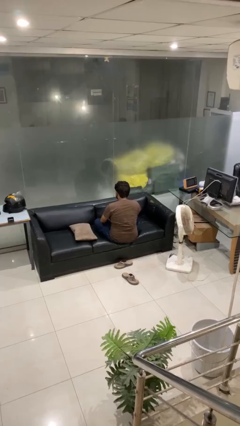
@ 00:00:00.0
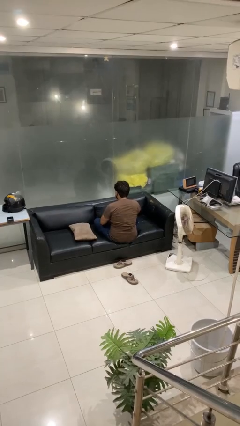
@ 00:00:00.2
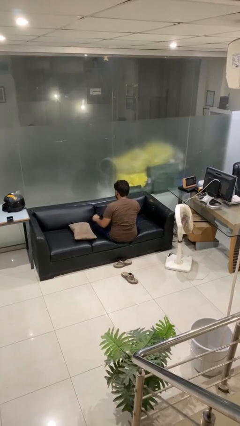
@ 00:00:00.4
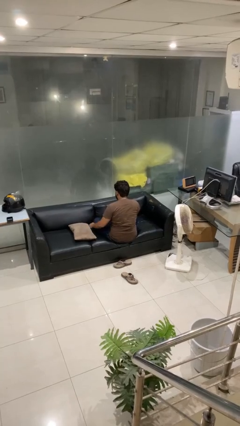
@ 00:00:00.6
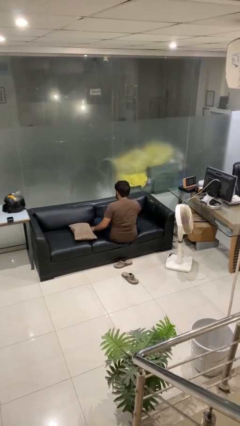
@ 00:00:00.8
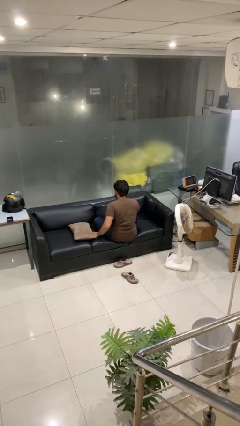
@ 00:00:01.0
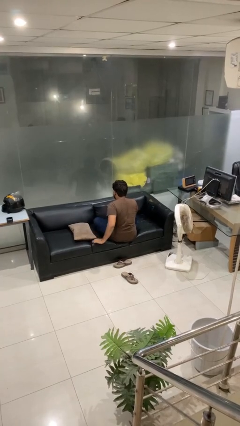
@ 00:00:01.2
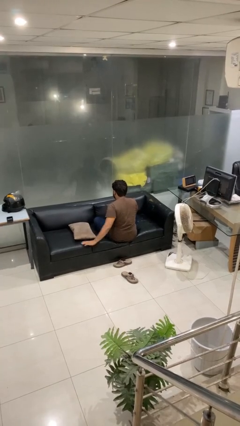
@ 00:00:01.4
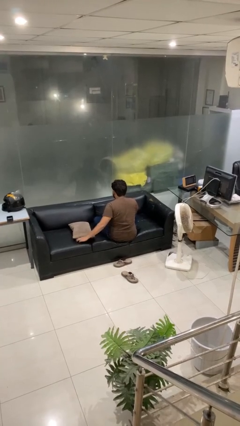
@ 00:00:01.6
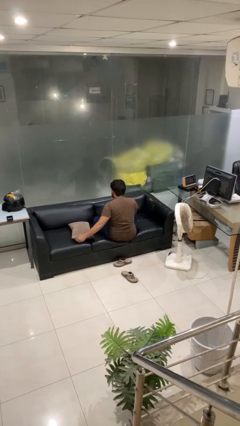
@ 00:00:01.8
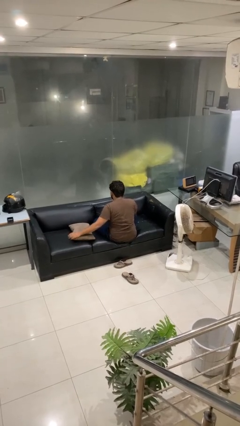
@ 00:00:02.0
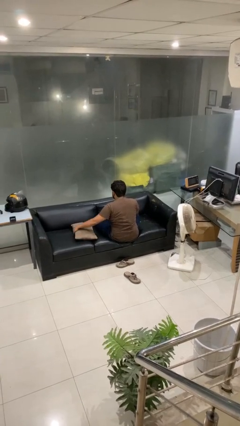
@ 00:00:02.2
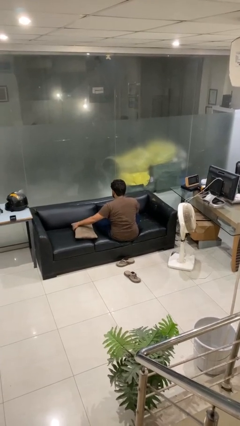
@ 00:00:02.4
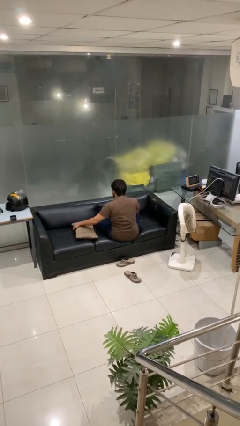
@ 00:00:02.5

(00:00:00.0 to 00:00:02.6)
person searches in couch

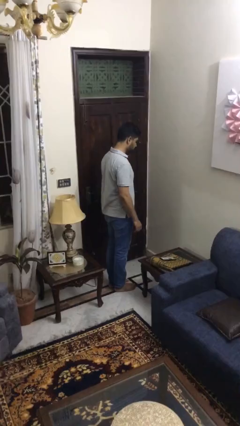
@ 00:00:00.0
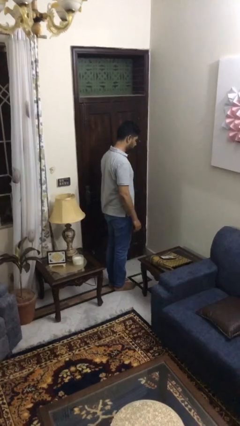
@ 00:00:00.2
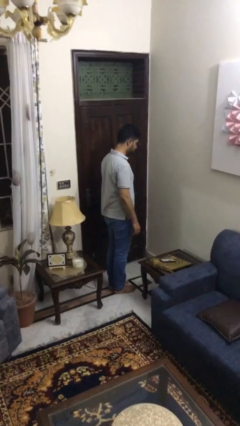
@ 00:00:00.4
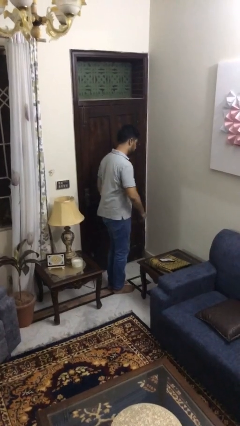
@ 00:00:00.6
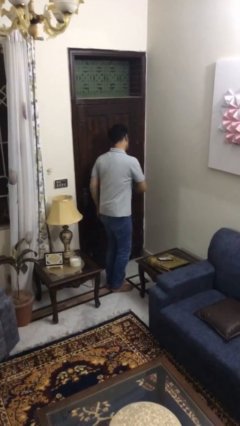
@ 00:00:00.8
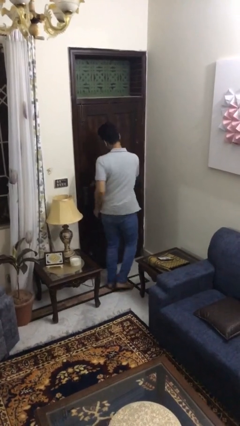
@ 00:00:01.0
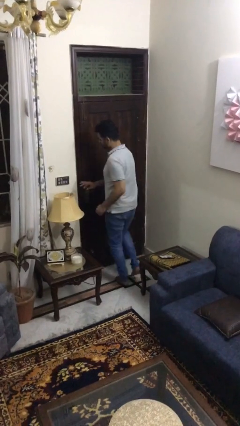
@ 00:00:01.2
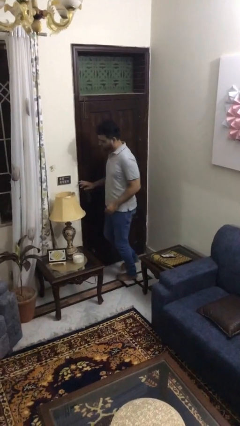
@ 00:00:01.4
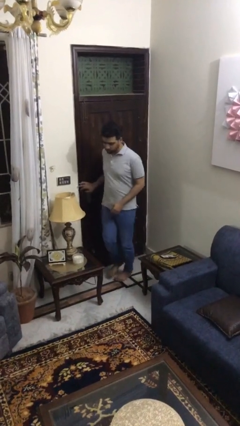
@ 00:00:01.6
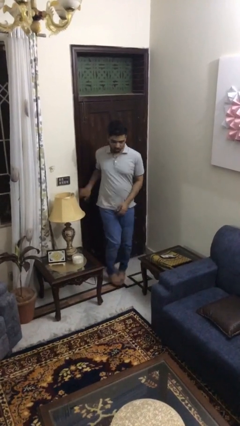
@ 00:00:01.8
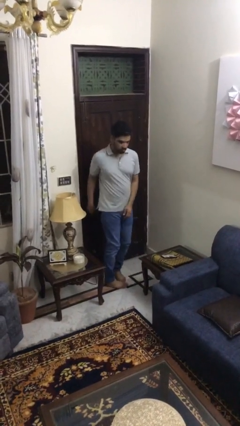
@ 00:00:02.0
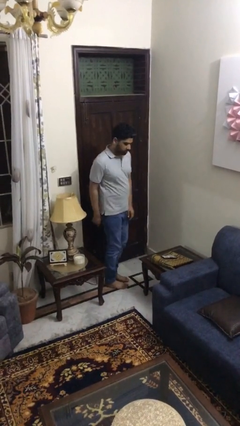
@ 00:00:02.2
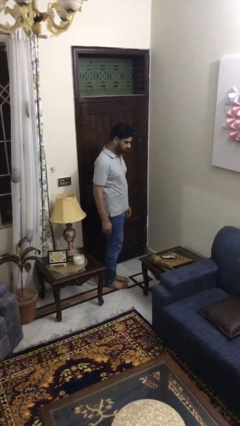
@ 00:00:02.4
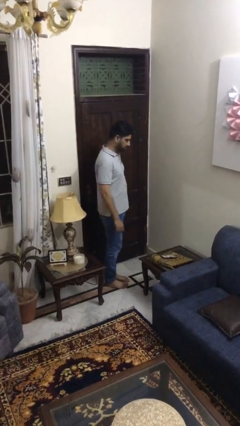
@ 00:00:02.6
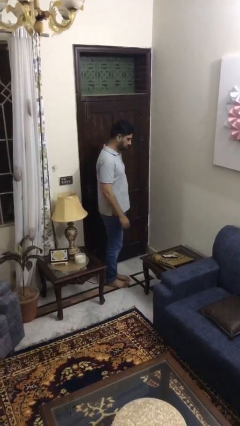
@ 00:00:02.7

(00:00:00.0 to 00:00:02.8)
person twirls

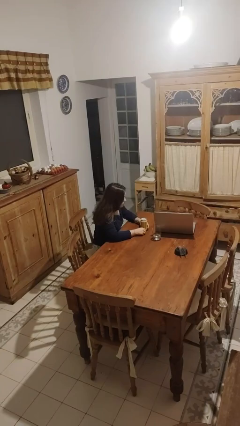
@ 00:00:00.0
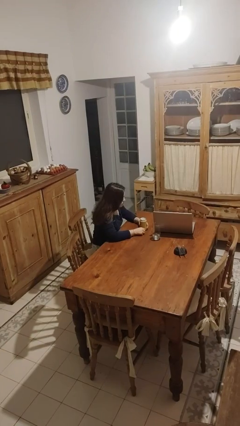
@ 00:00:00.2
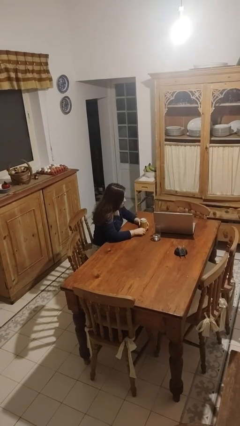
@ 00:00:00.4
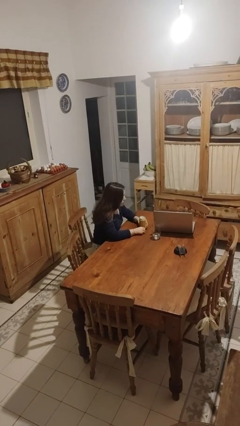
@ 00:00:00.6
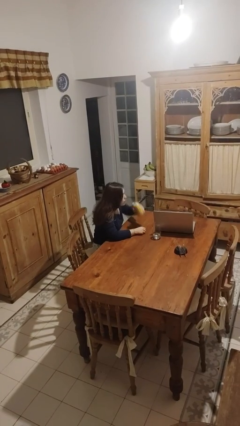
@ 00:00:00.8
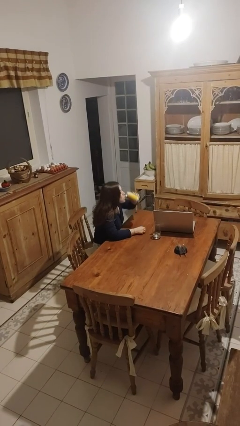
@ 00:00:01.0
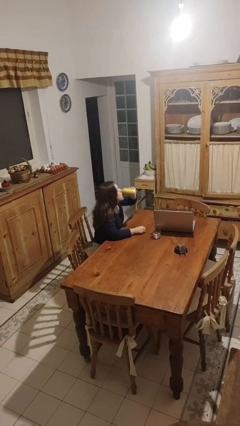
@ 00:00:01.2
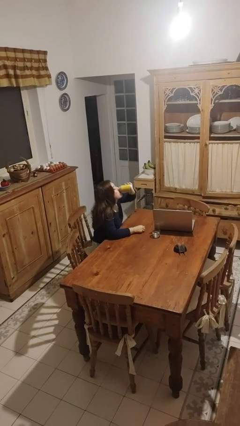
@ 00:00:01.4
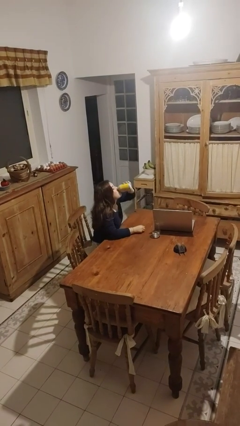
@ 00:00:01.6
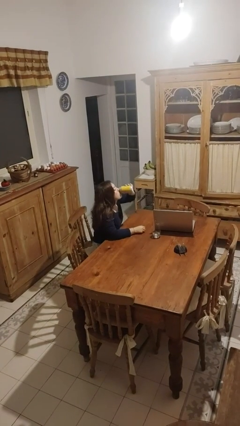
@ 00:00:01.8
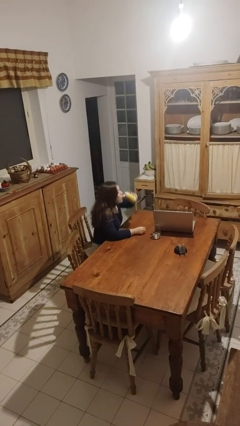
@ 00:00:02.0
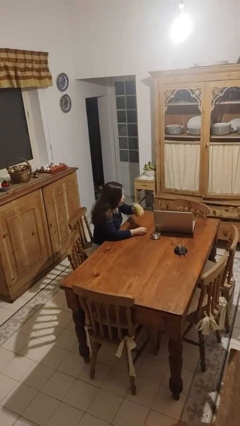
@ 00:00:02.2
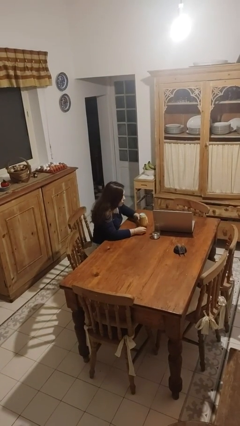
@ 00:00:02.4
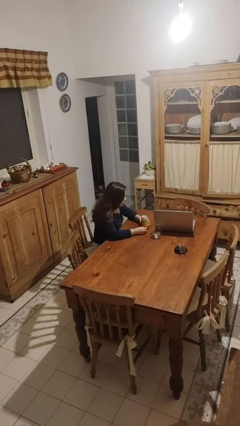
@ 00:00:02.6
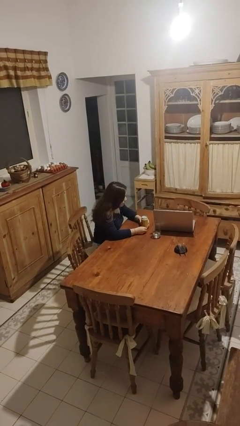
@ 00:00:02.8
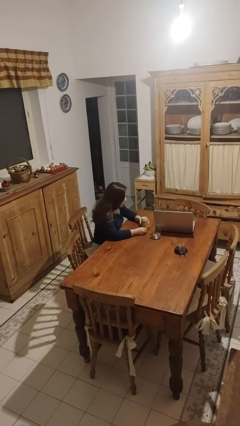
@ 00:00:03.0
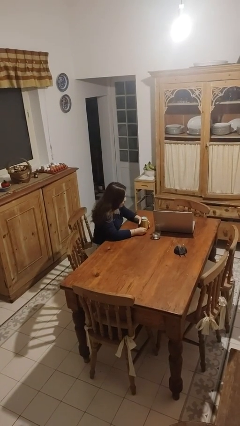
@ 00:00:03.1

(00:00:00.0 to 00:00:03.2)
person drinks from beverage can

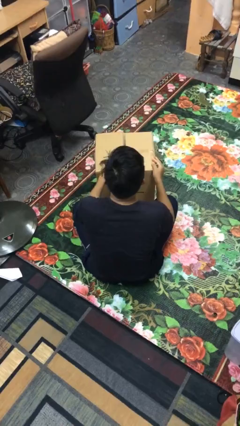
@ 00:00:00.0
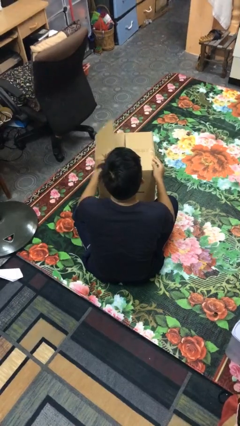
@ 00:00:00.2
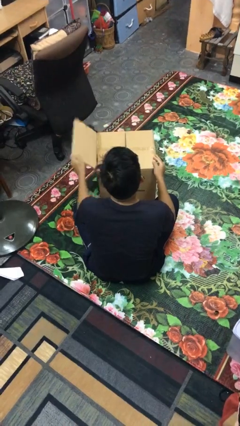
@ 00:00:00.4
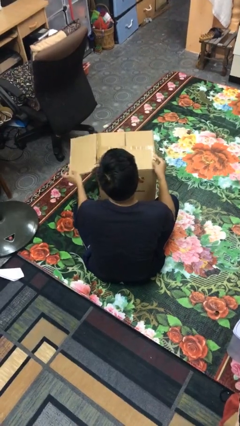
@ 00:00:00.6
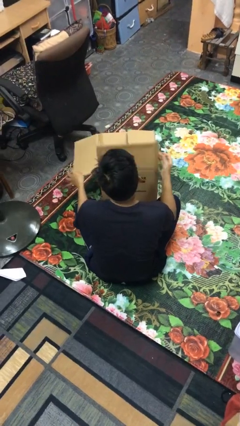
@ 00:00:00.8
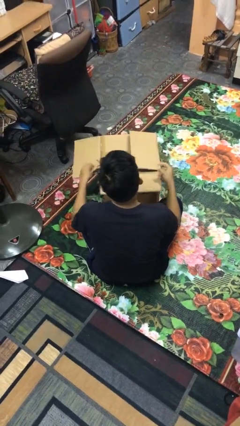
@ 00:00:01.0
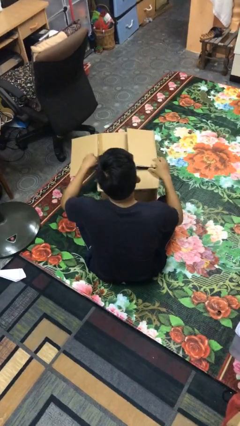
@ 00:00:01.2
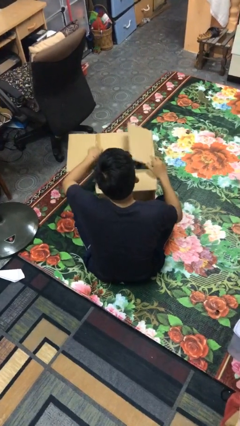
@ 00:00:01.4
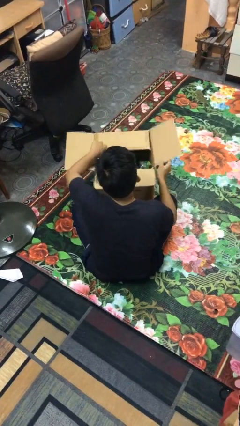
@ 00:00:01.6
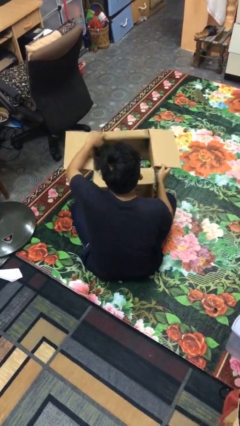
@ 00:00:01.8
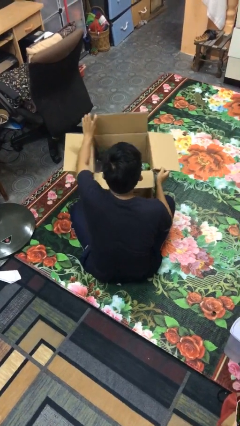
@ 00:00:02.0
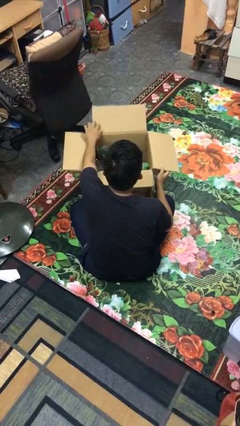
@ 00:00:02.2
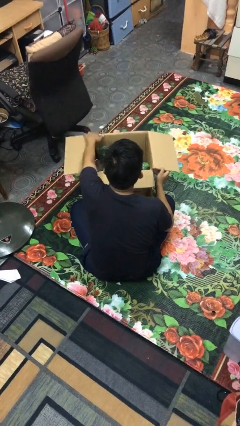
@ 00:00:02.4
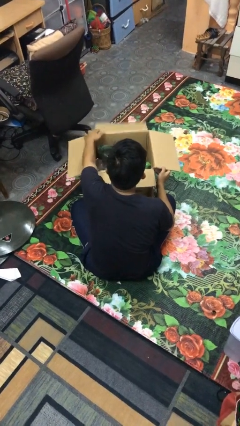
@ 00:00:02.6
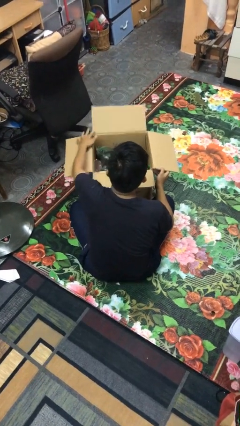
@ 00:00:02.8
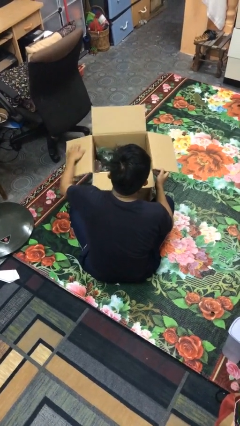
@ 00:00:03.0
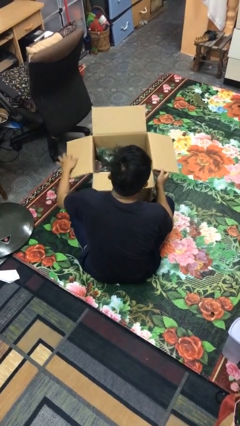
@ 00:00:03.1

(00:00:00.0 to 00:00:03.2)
person opens box

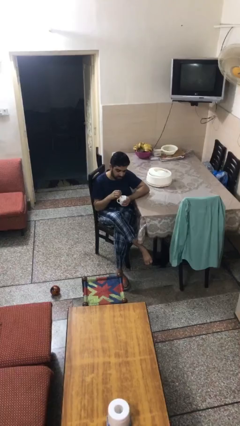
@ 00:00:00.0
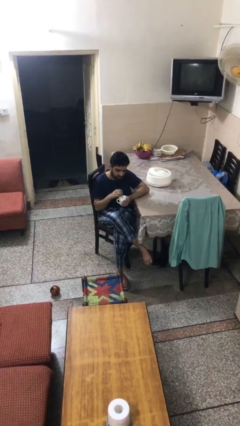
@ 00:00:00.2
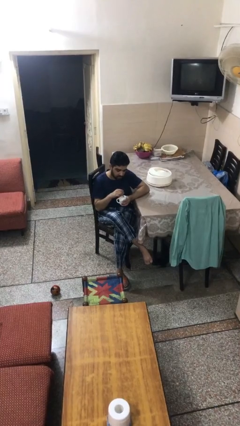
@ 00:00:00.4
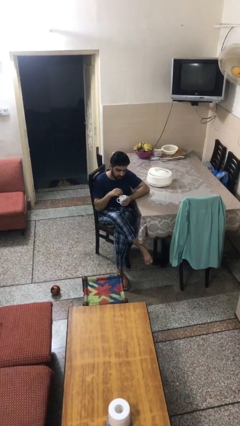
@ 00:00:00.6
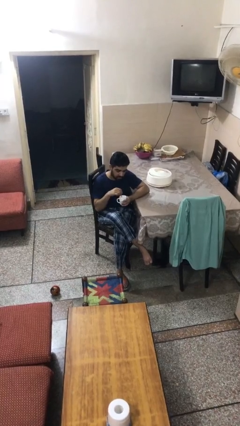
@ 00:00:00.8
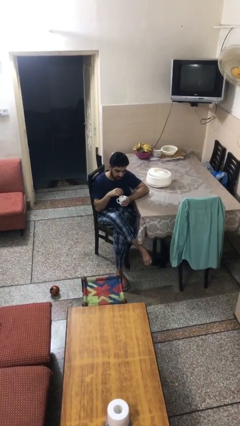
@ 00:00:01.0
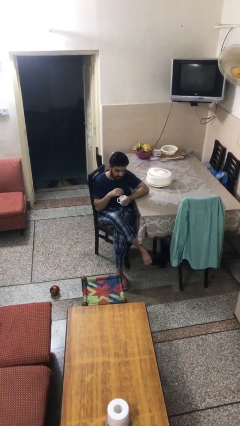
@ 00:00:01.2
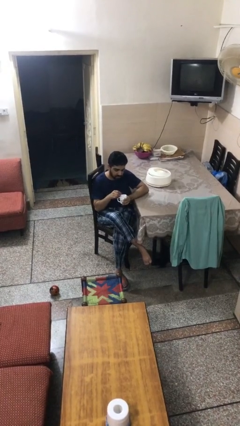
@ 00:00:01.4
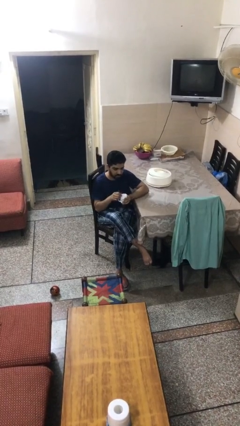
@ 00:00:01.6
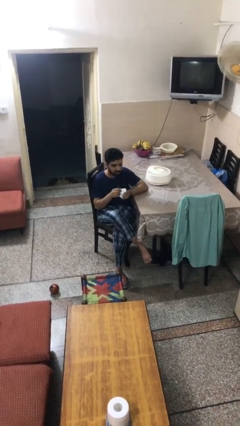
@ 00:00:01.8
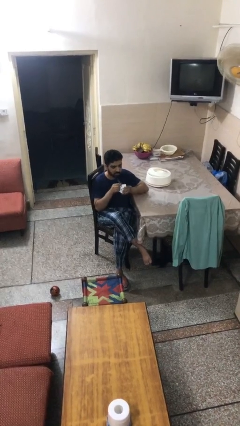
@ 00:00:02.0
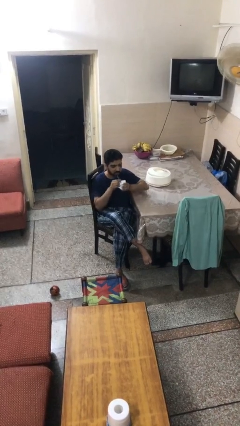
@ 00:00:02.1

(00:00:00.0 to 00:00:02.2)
person stirs mug

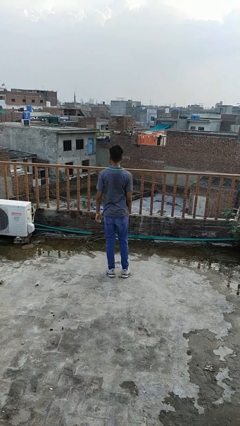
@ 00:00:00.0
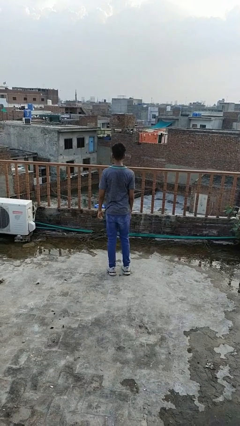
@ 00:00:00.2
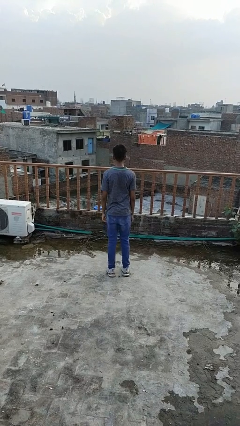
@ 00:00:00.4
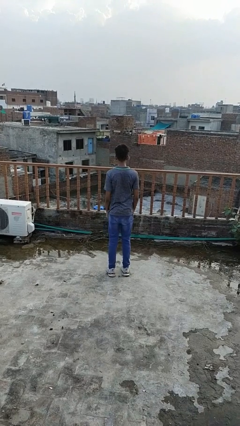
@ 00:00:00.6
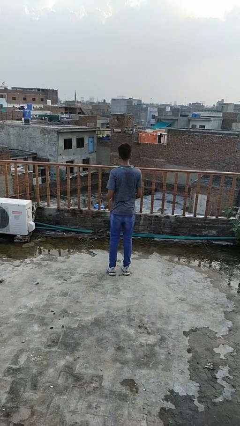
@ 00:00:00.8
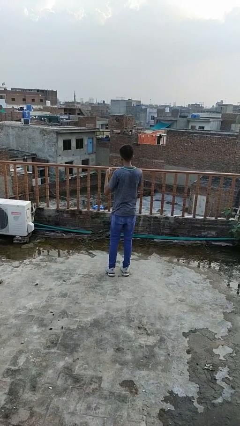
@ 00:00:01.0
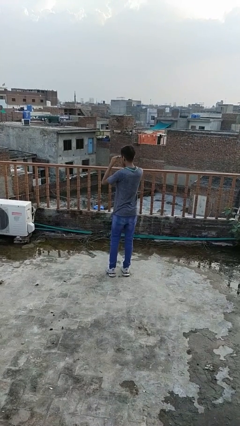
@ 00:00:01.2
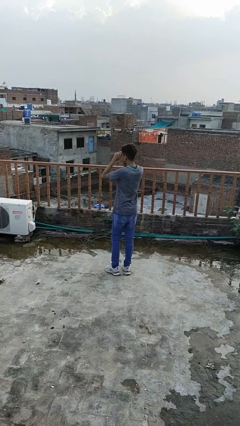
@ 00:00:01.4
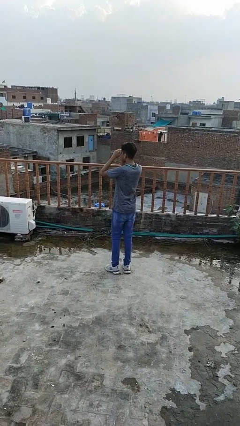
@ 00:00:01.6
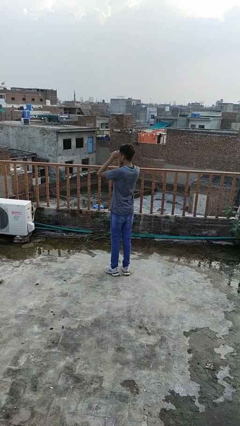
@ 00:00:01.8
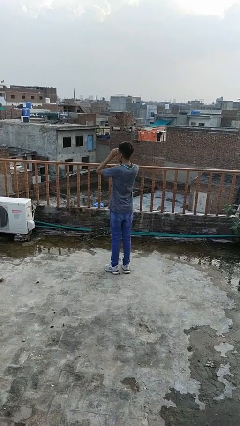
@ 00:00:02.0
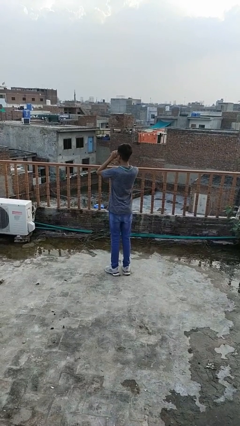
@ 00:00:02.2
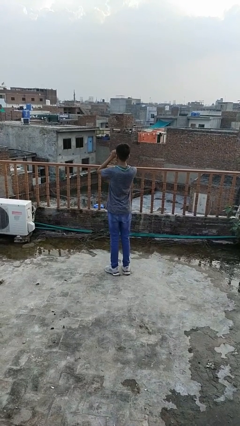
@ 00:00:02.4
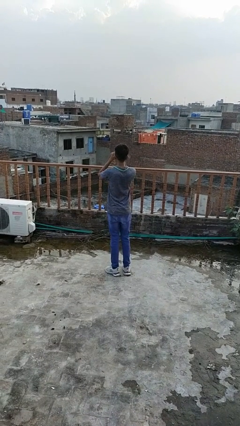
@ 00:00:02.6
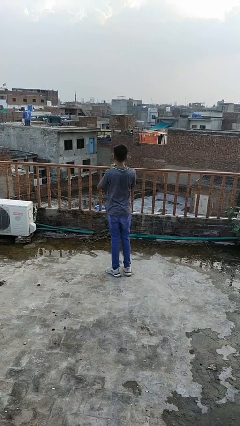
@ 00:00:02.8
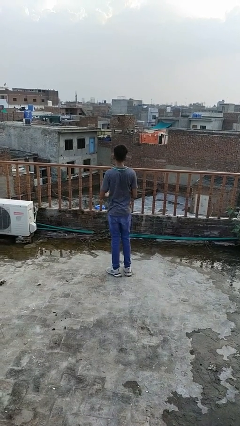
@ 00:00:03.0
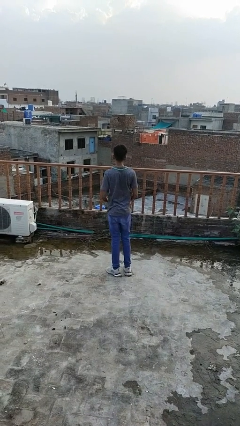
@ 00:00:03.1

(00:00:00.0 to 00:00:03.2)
person shades eyes

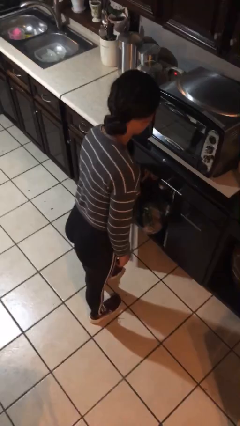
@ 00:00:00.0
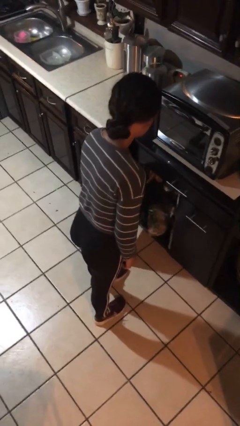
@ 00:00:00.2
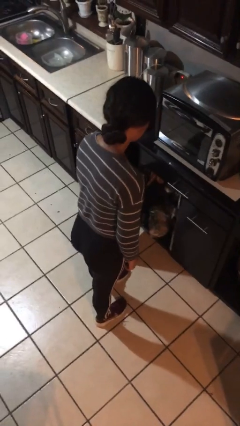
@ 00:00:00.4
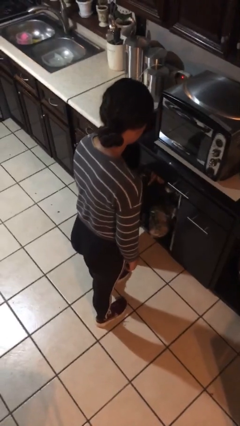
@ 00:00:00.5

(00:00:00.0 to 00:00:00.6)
person opens cabinet
